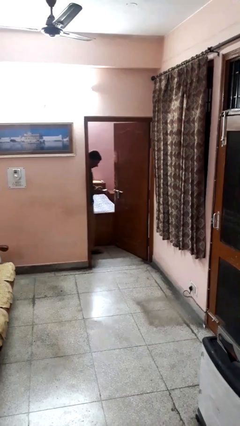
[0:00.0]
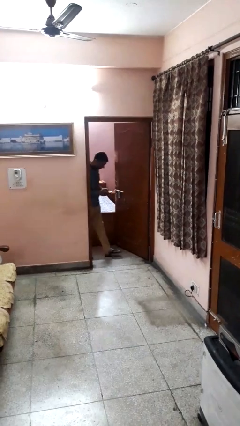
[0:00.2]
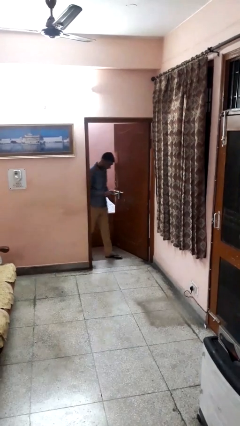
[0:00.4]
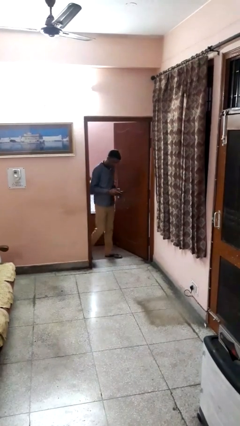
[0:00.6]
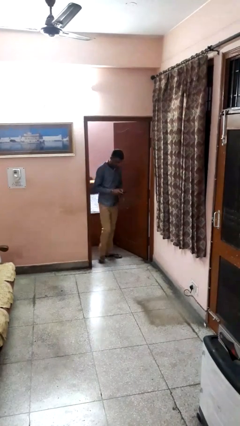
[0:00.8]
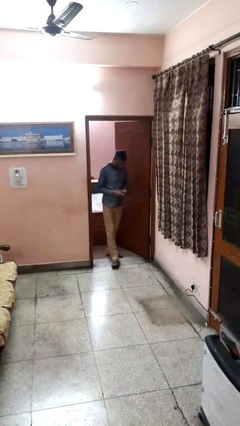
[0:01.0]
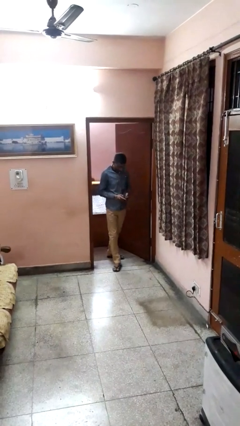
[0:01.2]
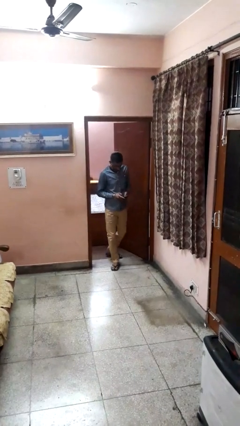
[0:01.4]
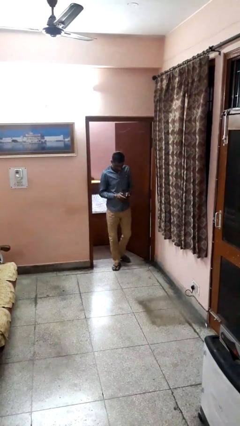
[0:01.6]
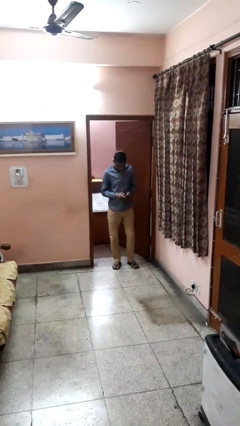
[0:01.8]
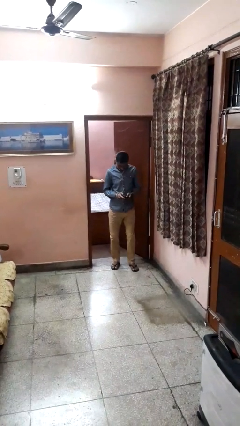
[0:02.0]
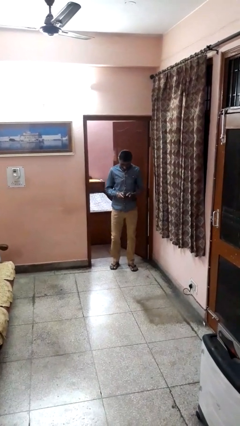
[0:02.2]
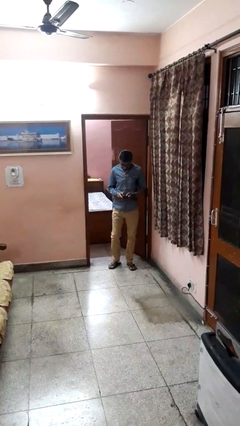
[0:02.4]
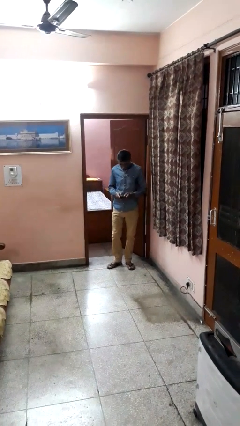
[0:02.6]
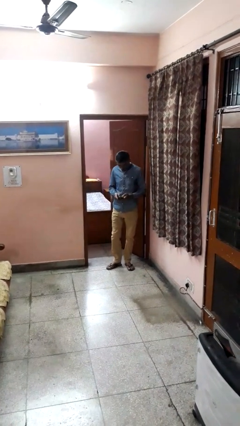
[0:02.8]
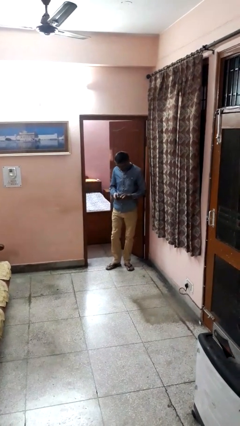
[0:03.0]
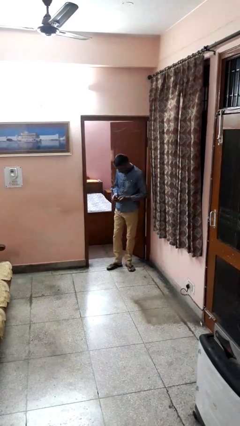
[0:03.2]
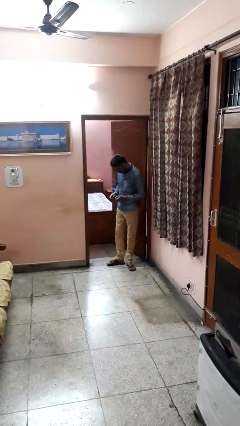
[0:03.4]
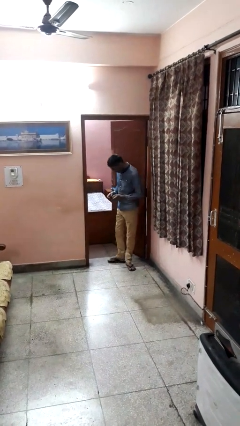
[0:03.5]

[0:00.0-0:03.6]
person enters scene through structure

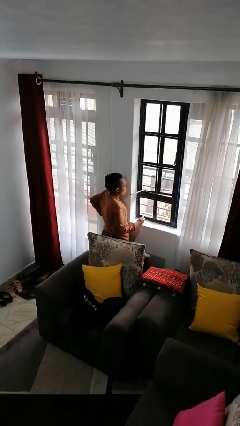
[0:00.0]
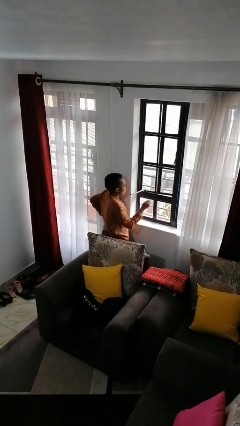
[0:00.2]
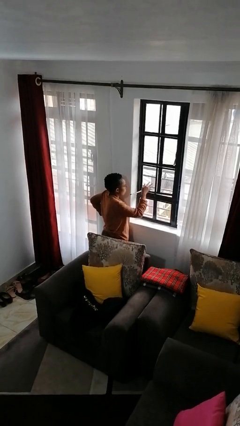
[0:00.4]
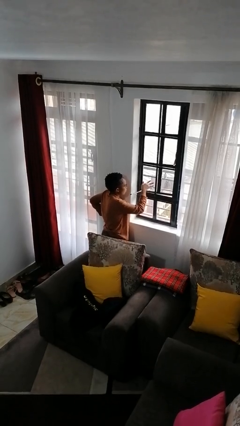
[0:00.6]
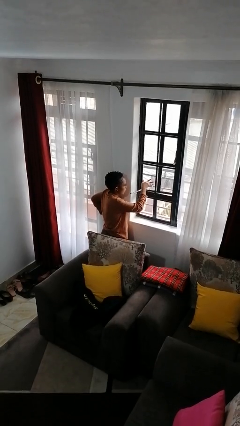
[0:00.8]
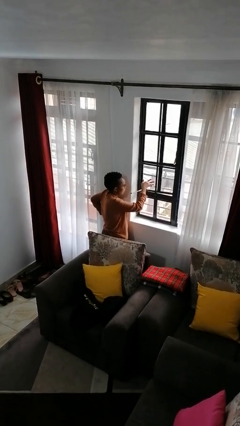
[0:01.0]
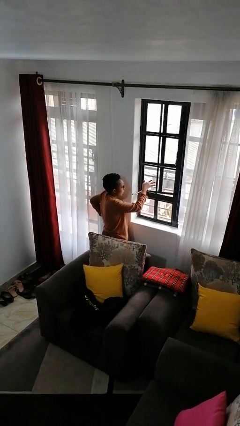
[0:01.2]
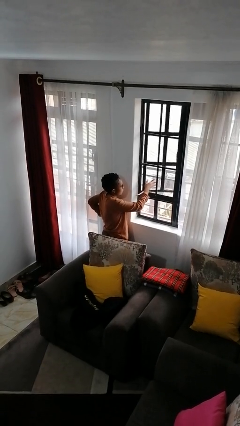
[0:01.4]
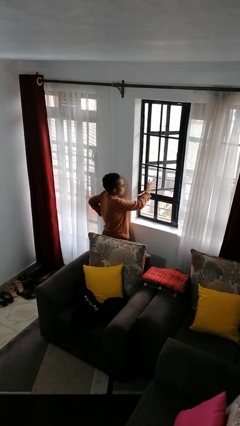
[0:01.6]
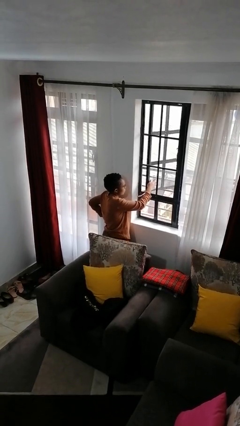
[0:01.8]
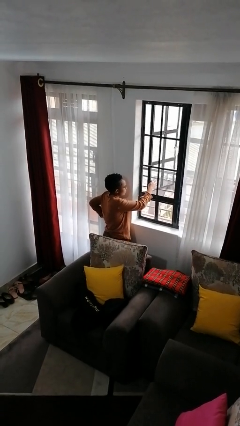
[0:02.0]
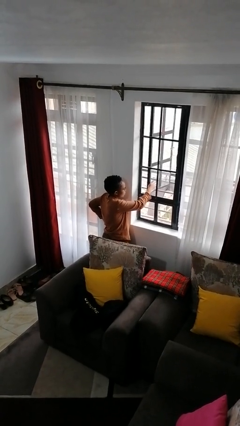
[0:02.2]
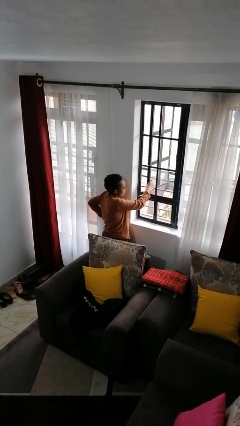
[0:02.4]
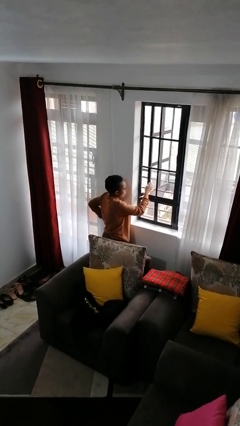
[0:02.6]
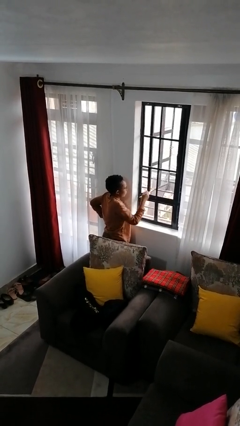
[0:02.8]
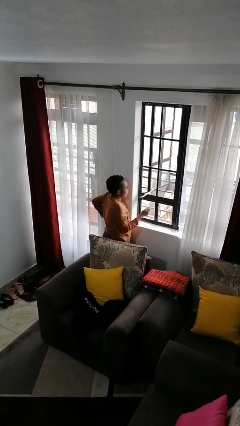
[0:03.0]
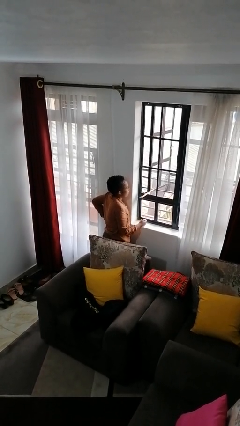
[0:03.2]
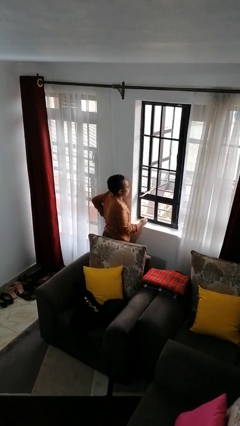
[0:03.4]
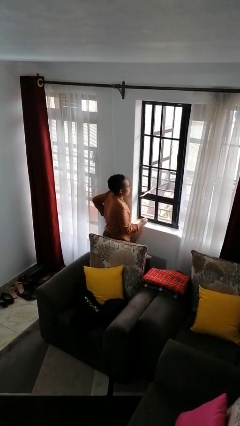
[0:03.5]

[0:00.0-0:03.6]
person opens home window

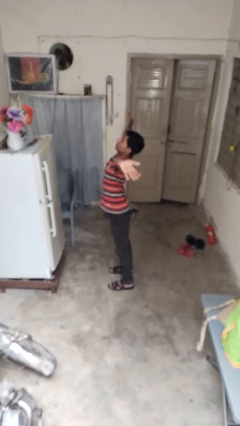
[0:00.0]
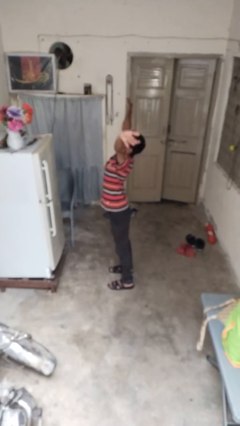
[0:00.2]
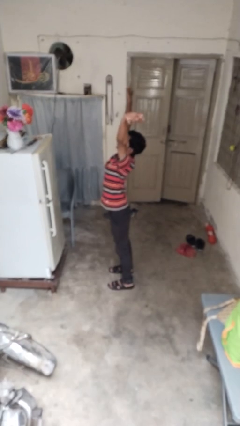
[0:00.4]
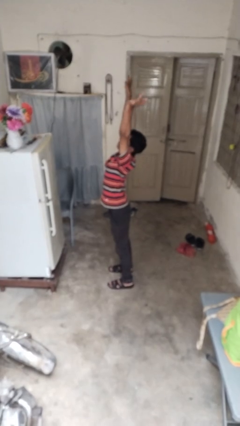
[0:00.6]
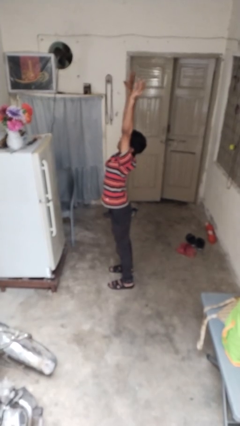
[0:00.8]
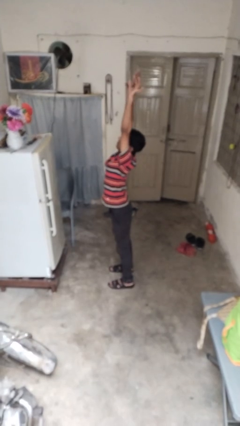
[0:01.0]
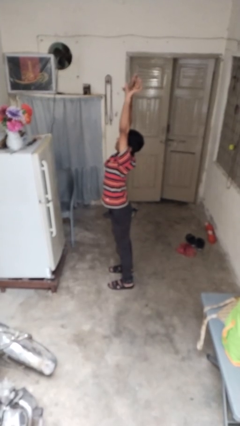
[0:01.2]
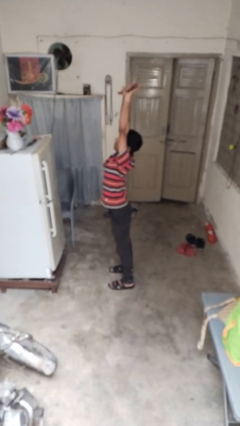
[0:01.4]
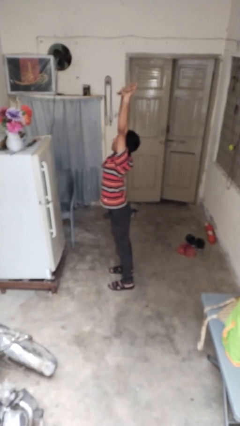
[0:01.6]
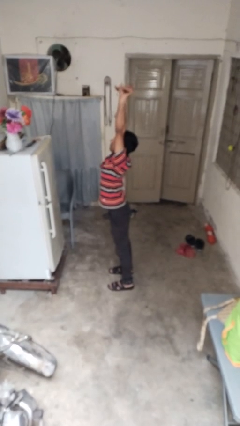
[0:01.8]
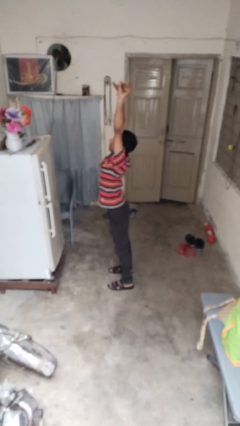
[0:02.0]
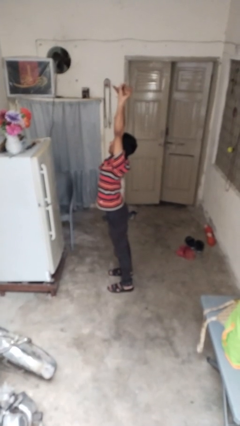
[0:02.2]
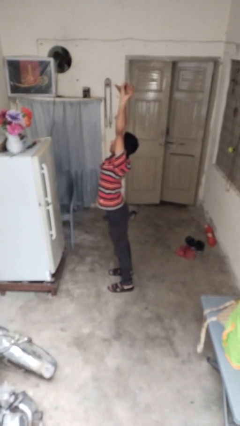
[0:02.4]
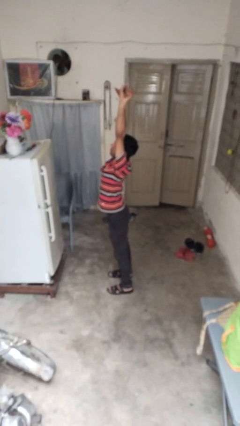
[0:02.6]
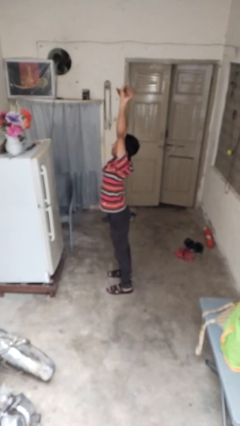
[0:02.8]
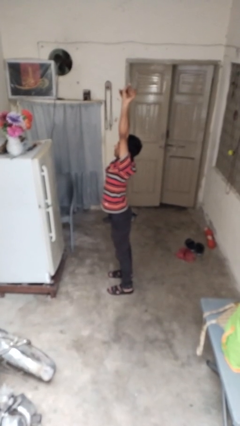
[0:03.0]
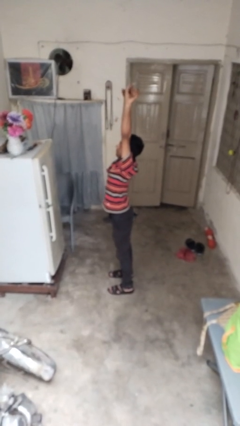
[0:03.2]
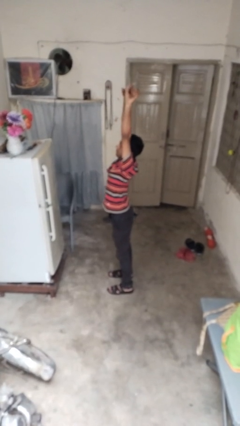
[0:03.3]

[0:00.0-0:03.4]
person stretches arms over head

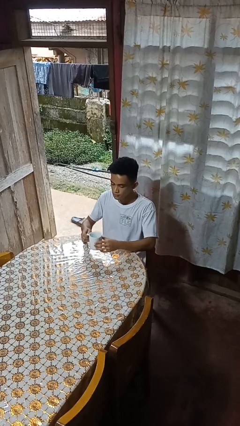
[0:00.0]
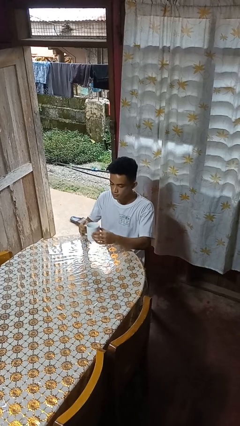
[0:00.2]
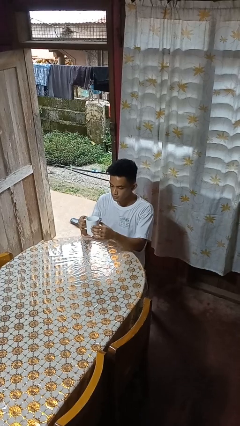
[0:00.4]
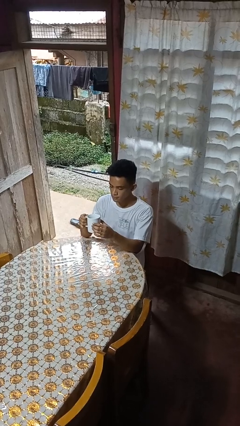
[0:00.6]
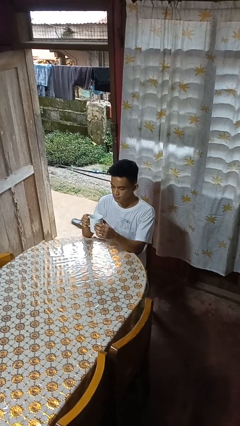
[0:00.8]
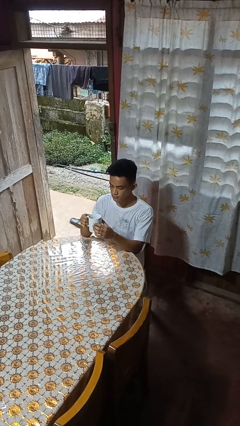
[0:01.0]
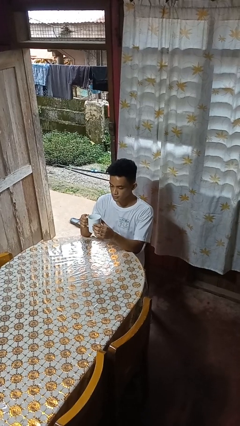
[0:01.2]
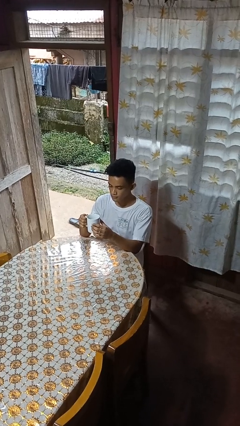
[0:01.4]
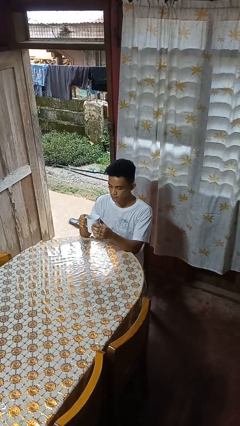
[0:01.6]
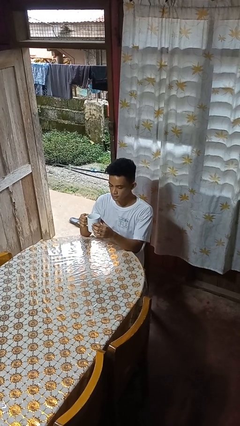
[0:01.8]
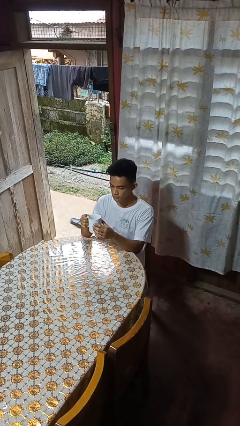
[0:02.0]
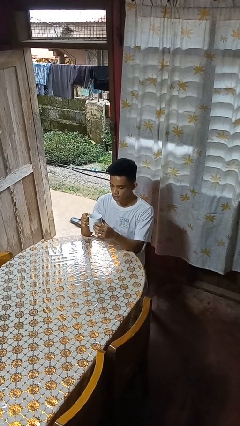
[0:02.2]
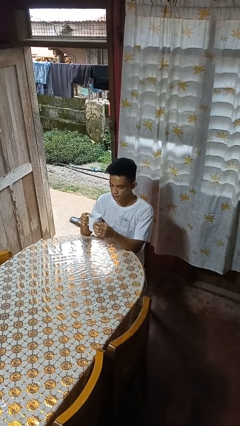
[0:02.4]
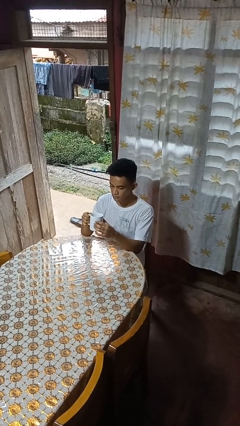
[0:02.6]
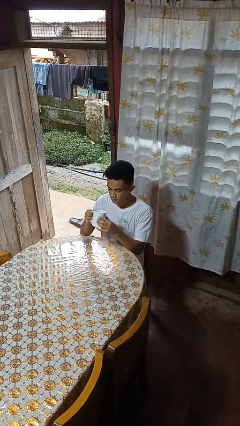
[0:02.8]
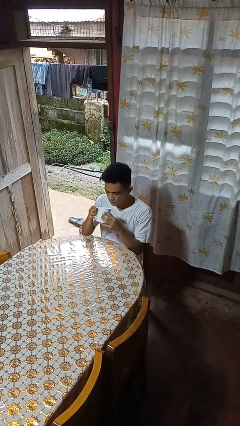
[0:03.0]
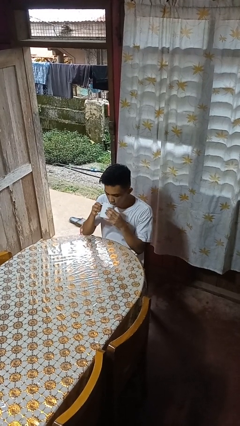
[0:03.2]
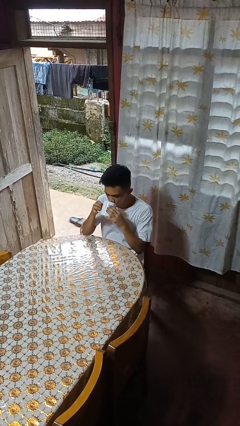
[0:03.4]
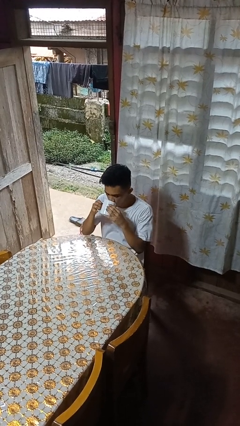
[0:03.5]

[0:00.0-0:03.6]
person picks up object from table

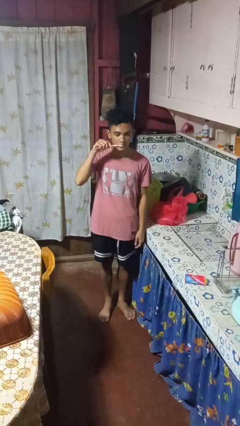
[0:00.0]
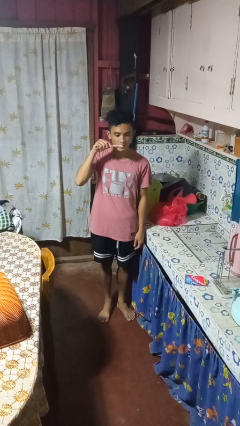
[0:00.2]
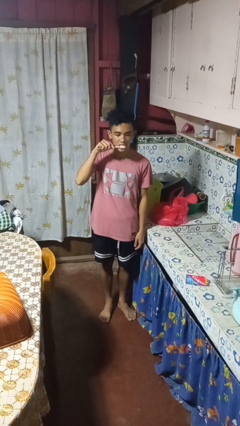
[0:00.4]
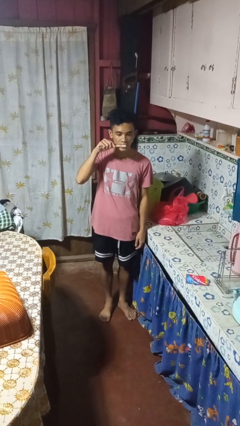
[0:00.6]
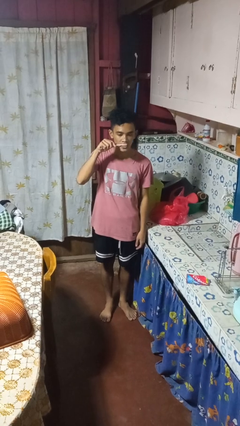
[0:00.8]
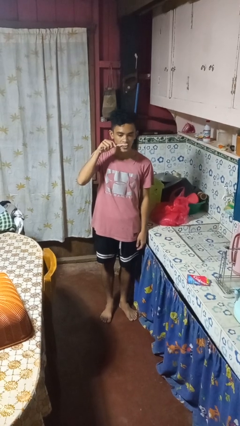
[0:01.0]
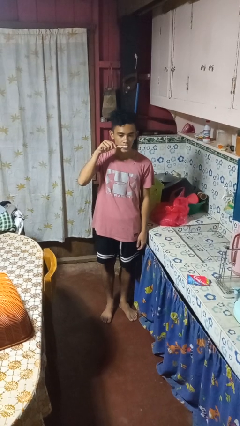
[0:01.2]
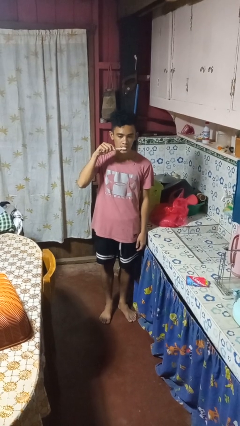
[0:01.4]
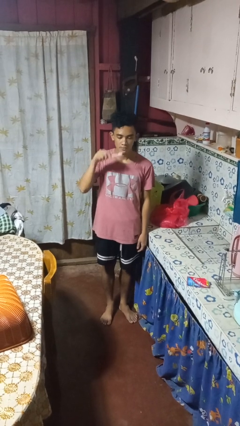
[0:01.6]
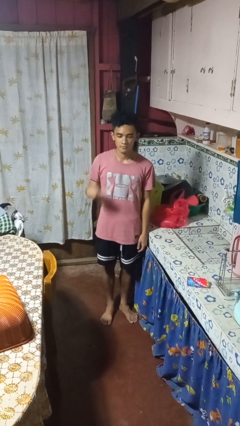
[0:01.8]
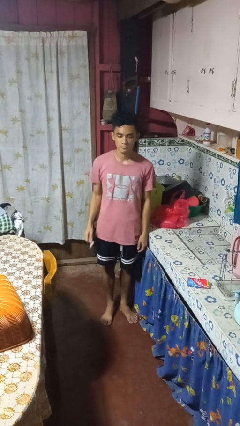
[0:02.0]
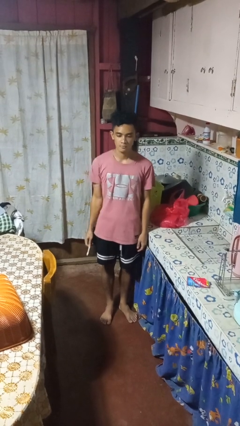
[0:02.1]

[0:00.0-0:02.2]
person brushes teeth

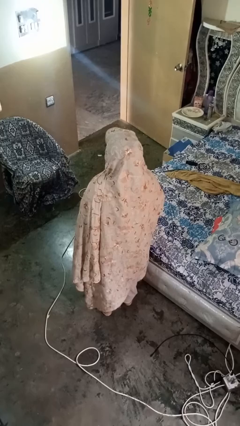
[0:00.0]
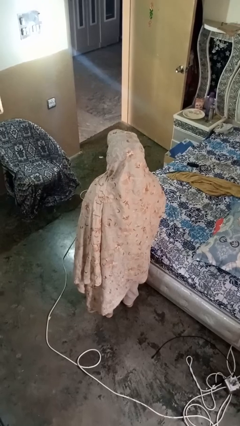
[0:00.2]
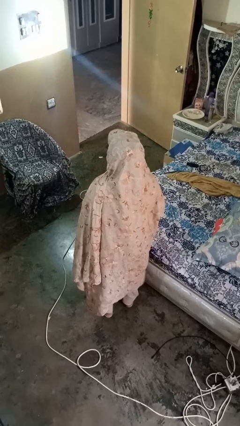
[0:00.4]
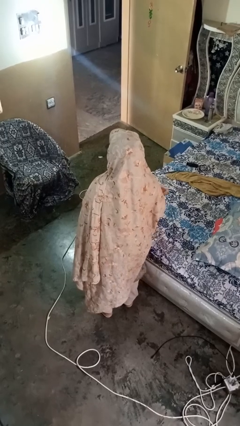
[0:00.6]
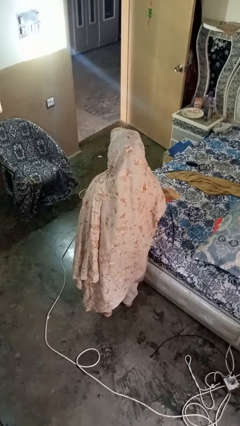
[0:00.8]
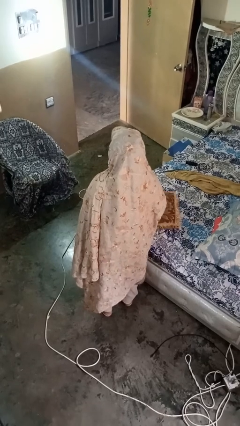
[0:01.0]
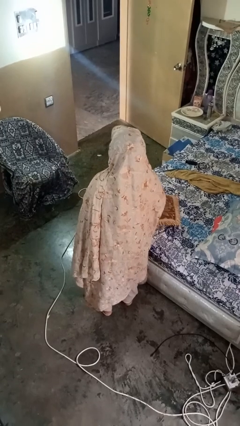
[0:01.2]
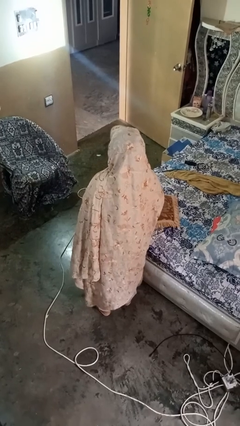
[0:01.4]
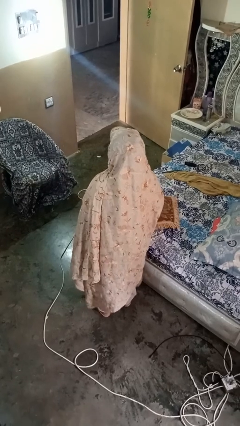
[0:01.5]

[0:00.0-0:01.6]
person puts down object on bed
